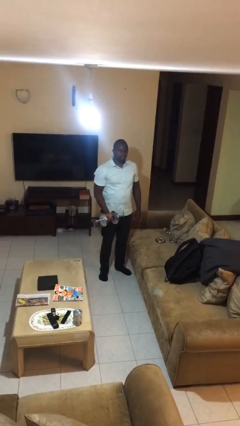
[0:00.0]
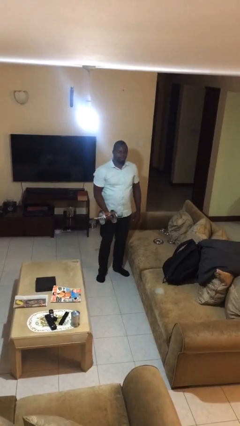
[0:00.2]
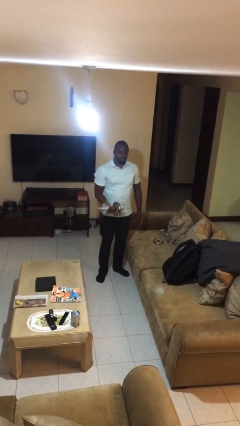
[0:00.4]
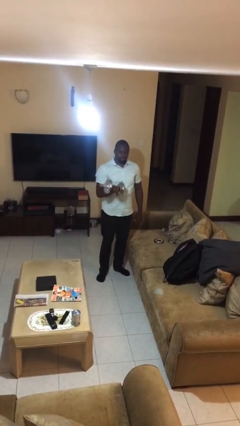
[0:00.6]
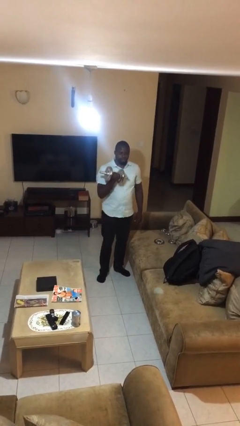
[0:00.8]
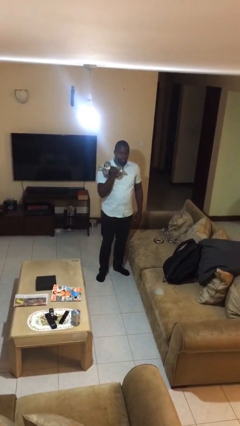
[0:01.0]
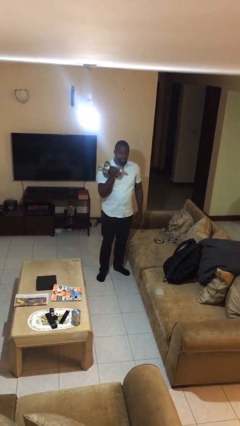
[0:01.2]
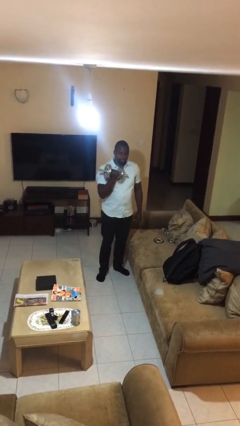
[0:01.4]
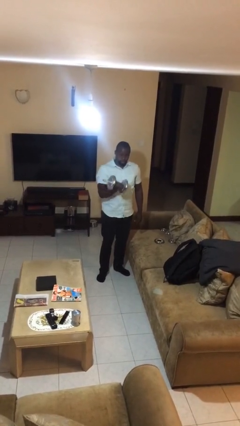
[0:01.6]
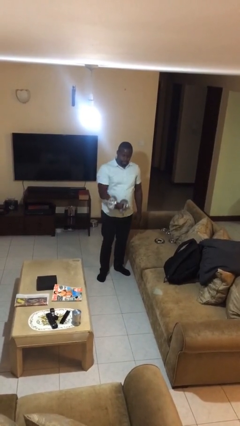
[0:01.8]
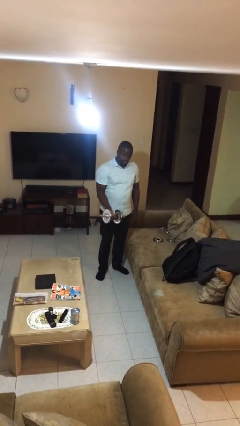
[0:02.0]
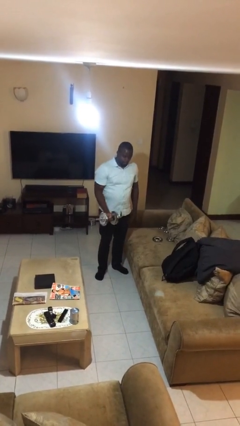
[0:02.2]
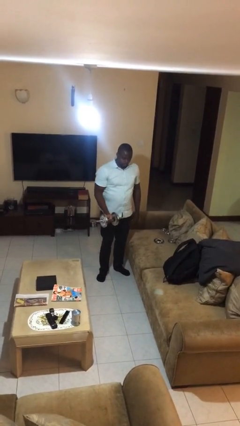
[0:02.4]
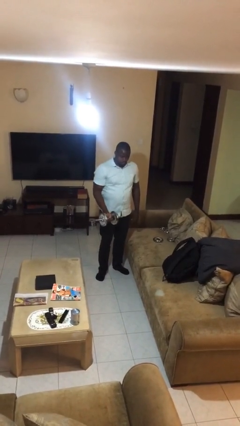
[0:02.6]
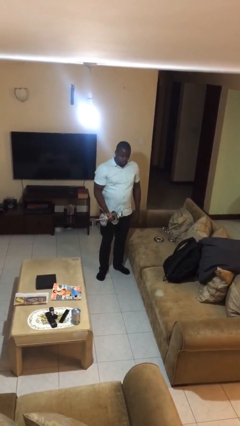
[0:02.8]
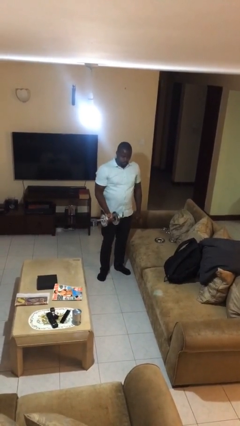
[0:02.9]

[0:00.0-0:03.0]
person lifts dumbbells

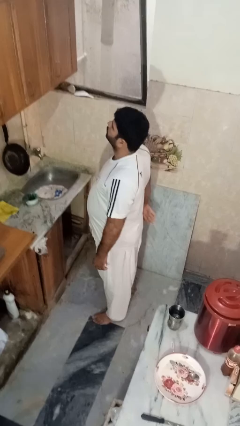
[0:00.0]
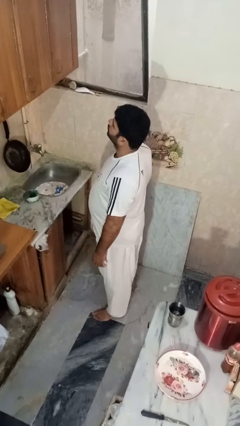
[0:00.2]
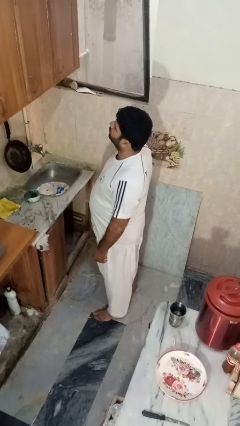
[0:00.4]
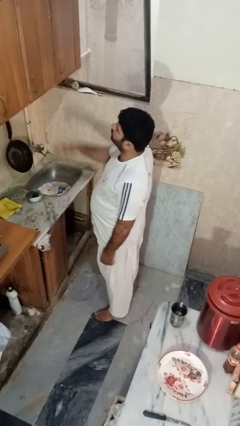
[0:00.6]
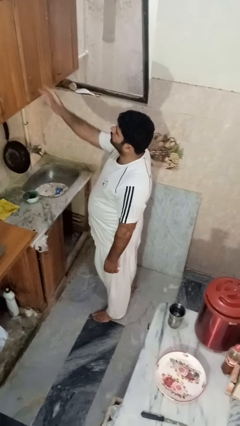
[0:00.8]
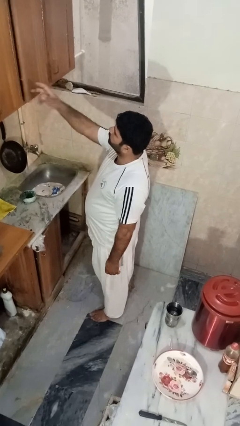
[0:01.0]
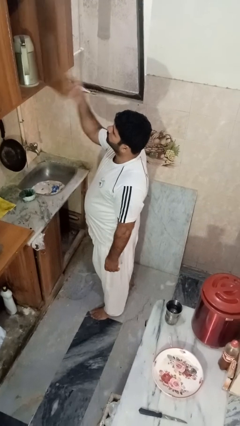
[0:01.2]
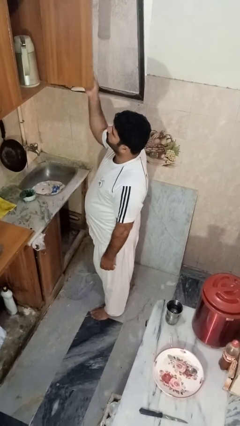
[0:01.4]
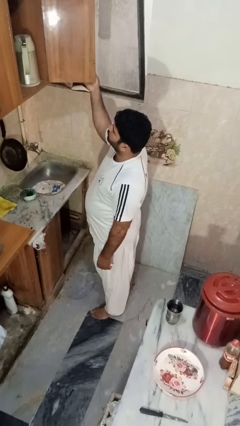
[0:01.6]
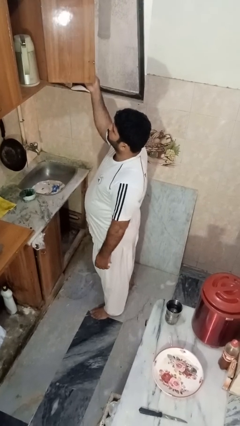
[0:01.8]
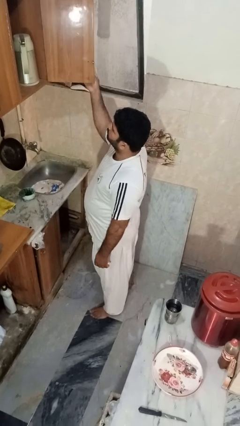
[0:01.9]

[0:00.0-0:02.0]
person opens cabinet

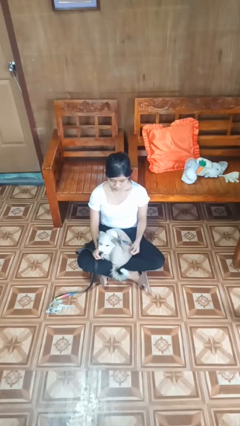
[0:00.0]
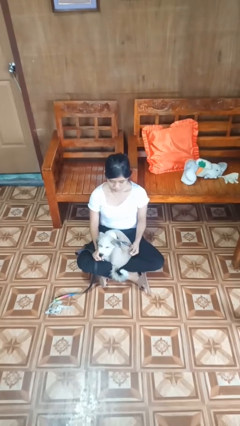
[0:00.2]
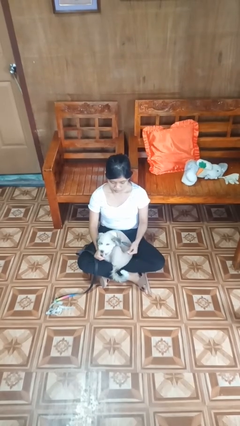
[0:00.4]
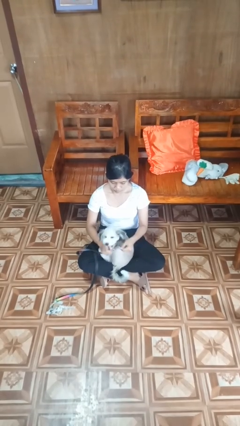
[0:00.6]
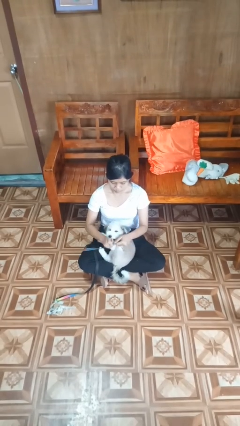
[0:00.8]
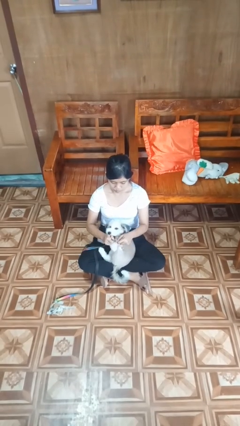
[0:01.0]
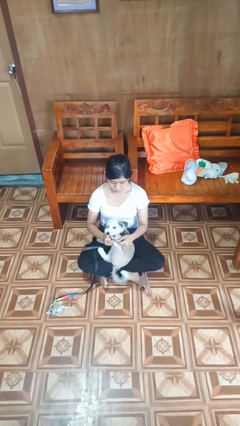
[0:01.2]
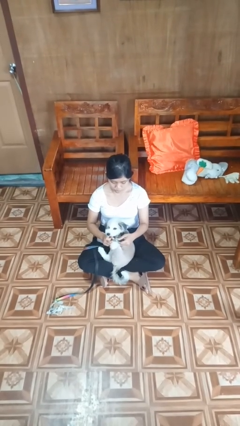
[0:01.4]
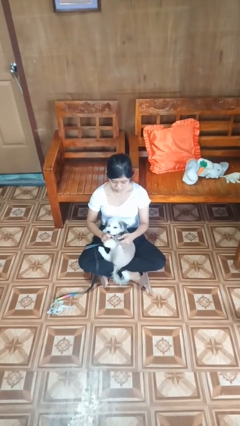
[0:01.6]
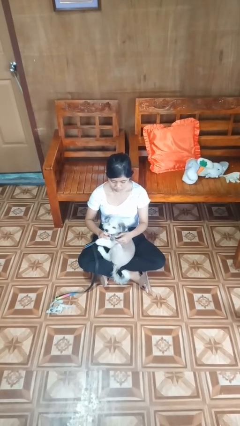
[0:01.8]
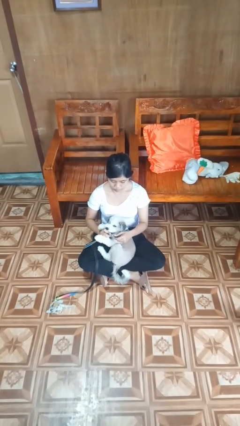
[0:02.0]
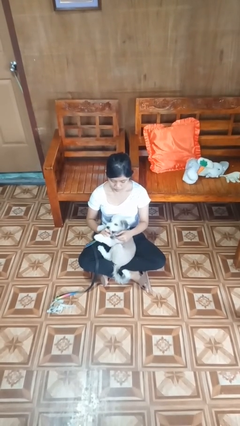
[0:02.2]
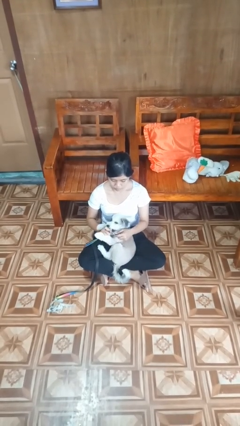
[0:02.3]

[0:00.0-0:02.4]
person attaches leash to dog

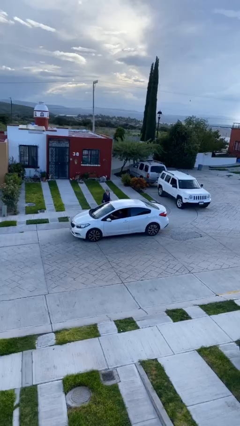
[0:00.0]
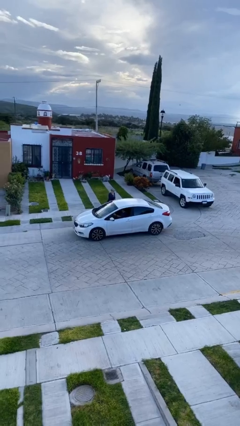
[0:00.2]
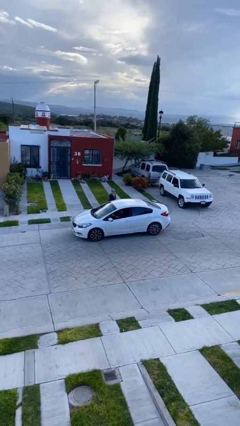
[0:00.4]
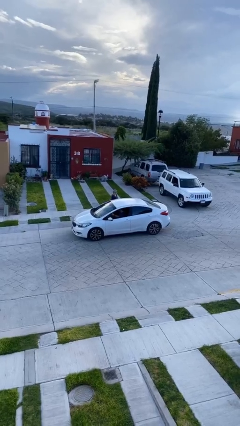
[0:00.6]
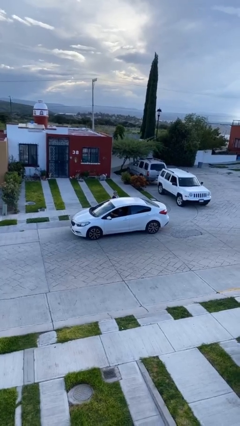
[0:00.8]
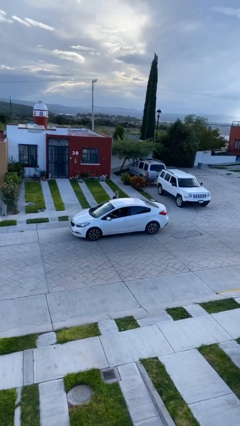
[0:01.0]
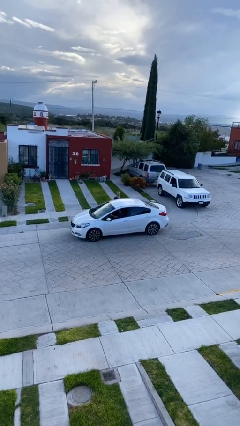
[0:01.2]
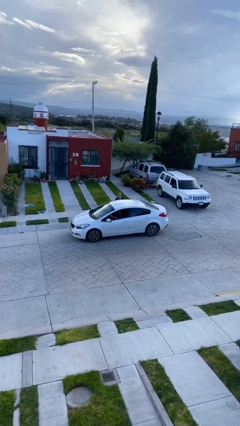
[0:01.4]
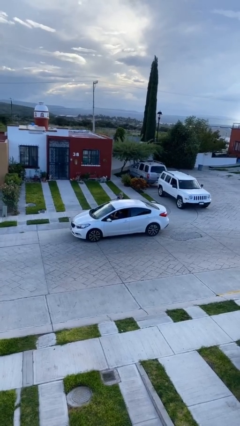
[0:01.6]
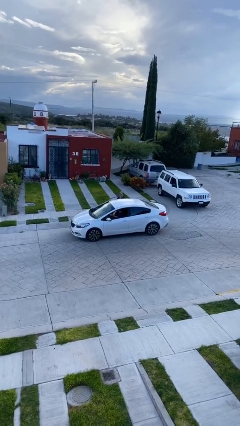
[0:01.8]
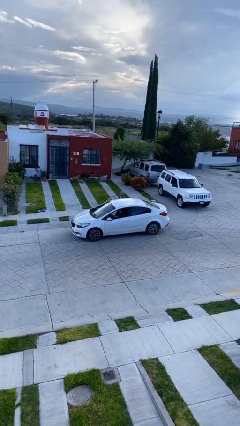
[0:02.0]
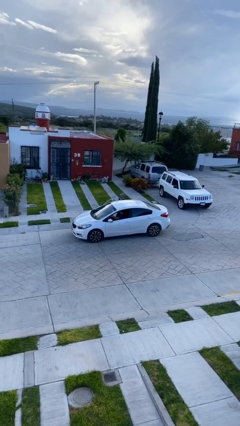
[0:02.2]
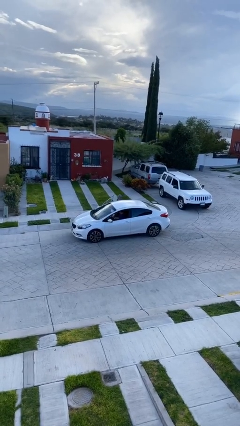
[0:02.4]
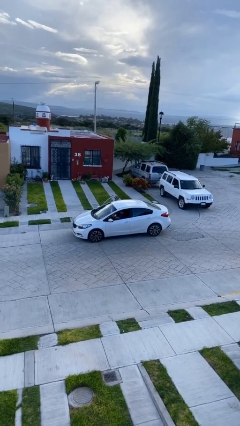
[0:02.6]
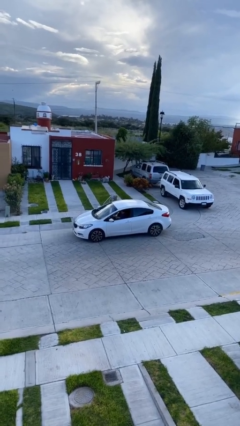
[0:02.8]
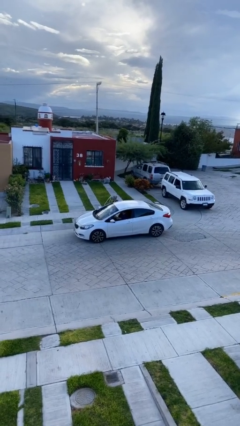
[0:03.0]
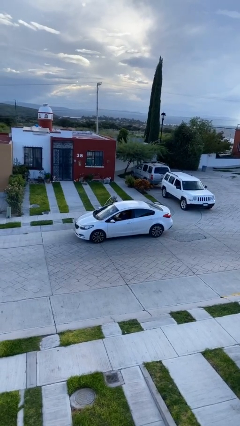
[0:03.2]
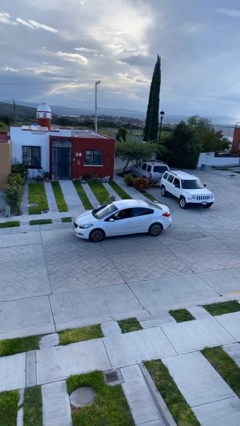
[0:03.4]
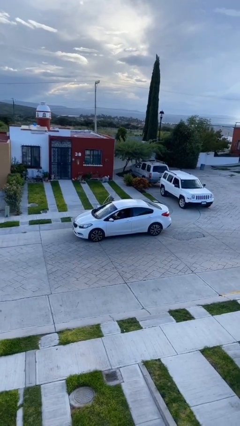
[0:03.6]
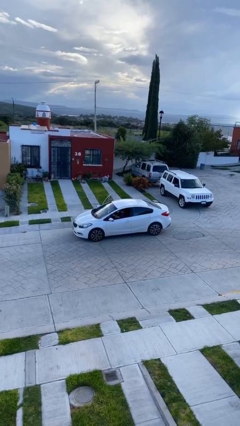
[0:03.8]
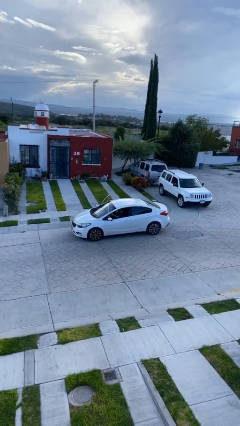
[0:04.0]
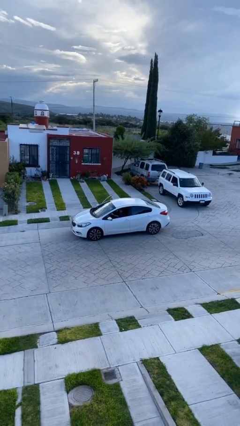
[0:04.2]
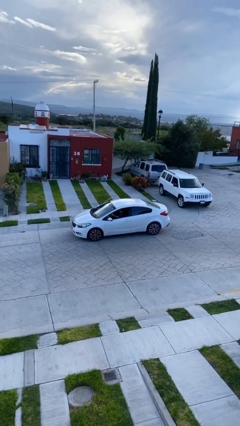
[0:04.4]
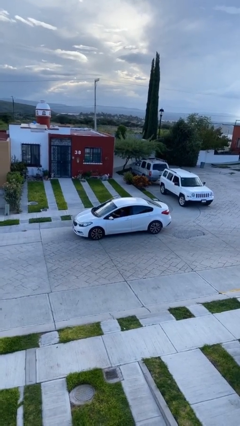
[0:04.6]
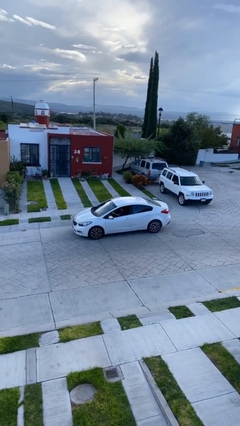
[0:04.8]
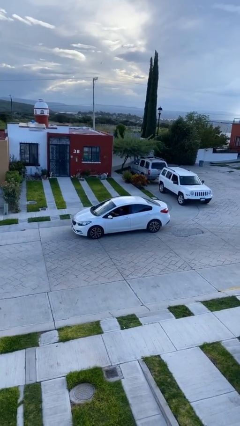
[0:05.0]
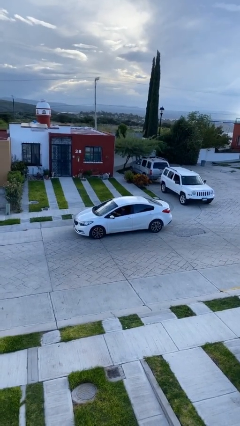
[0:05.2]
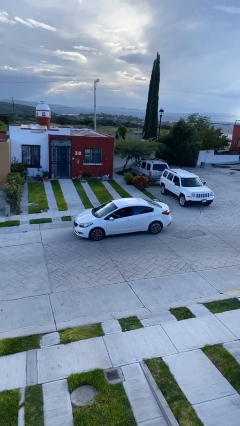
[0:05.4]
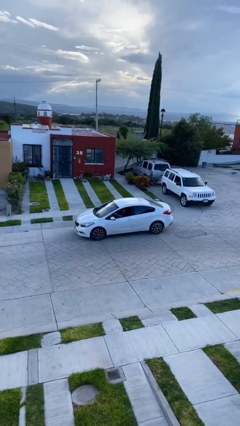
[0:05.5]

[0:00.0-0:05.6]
car picks up person

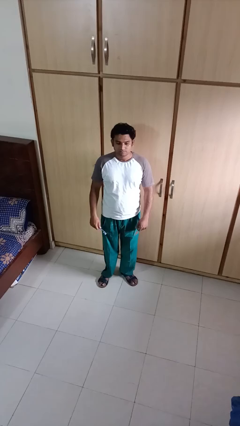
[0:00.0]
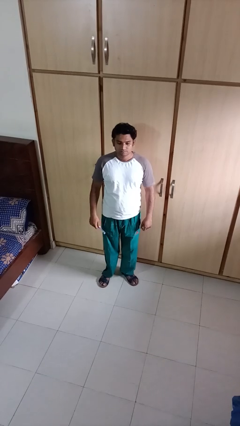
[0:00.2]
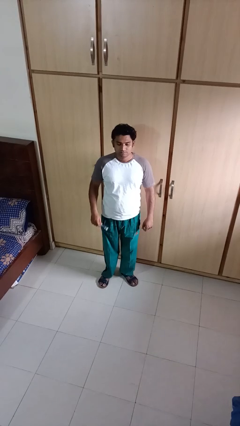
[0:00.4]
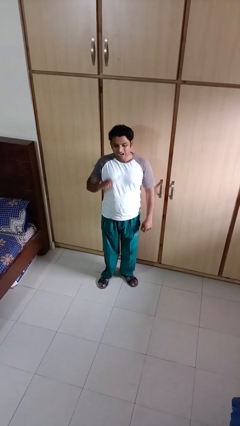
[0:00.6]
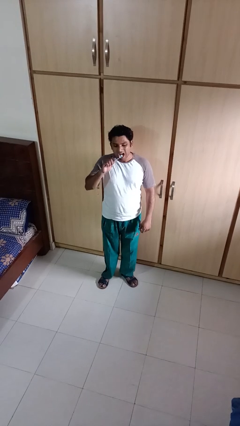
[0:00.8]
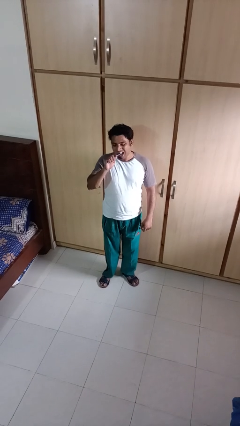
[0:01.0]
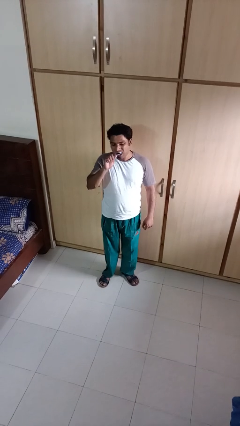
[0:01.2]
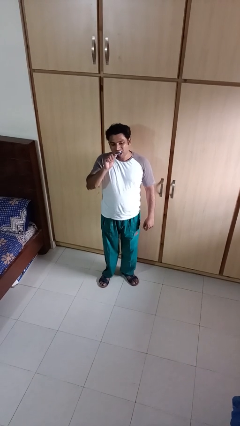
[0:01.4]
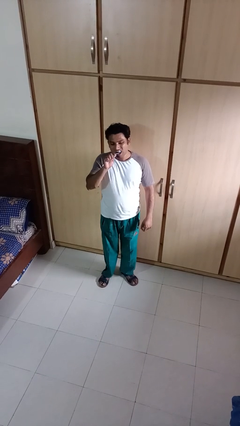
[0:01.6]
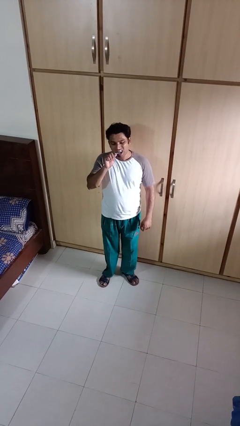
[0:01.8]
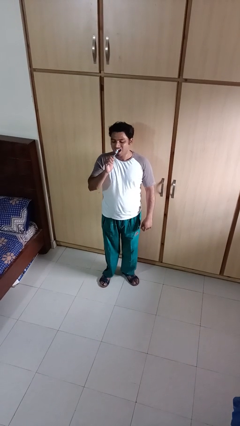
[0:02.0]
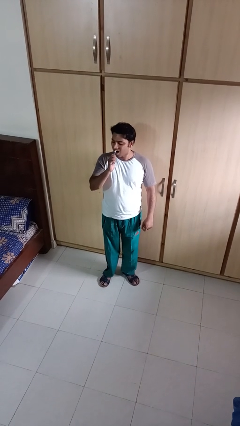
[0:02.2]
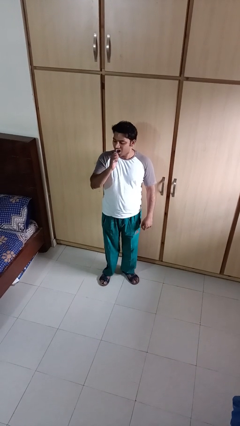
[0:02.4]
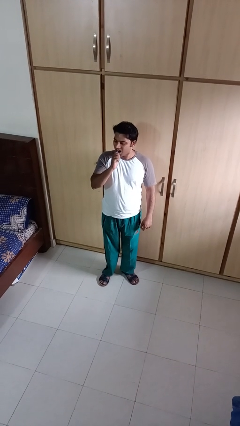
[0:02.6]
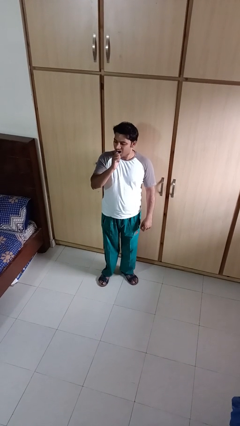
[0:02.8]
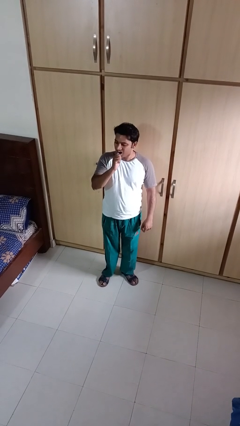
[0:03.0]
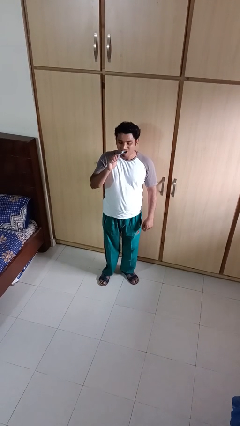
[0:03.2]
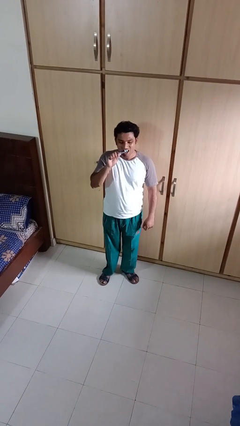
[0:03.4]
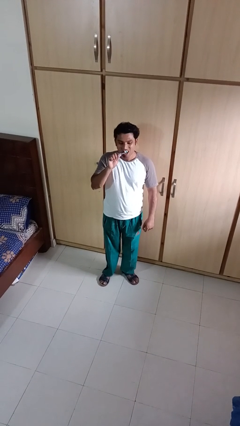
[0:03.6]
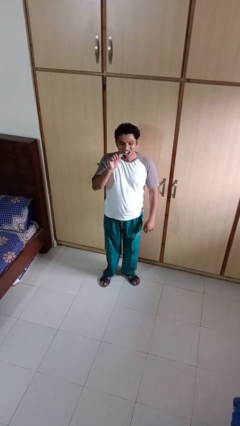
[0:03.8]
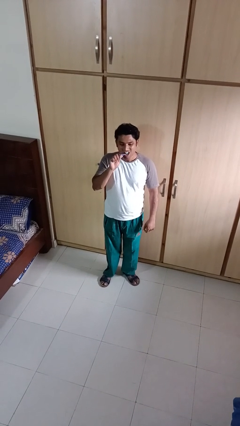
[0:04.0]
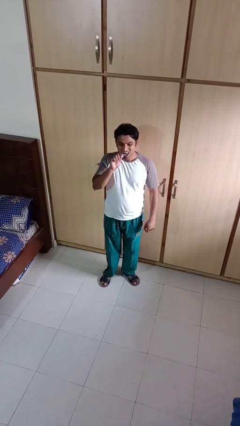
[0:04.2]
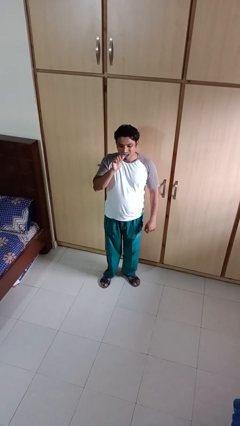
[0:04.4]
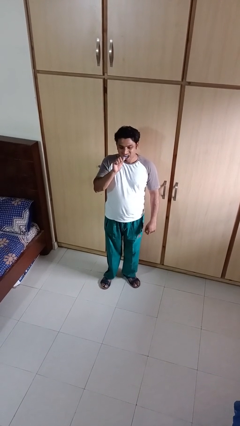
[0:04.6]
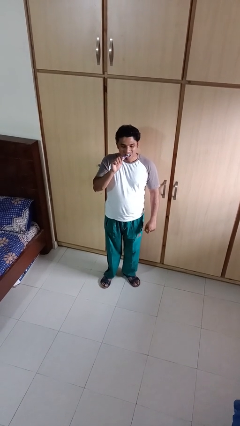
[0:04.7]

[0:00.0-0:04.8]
person brushes teeth
